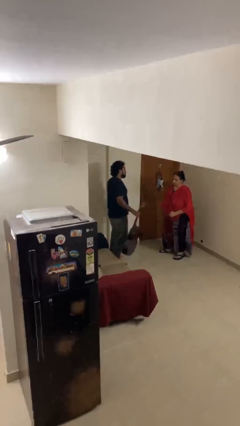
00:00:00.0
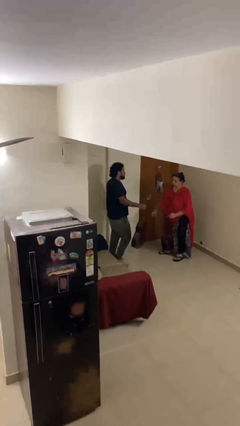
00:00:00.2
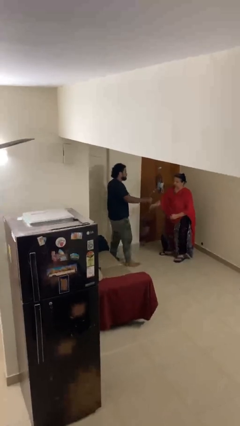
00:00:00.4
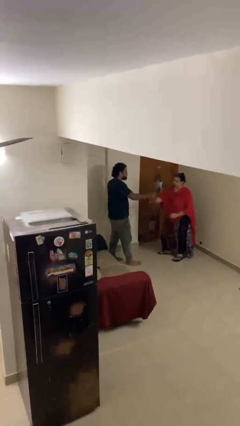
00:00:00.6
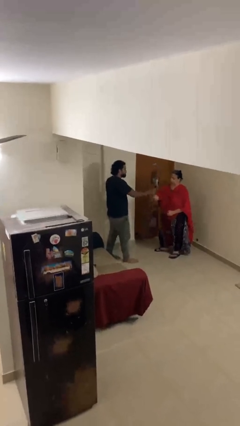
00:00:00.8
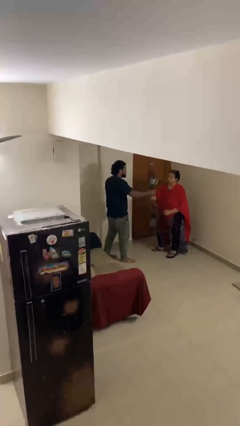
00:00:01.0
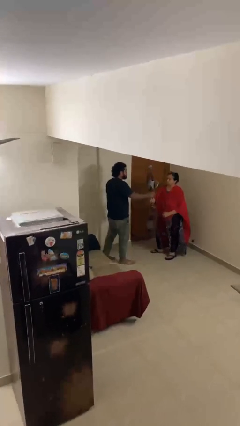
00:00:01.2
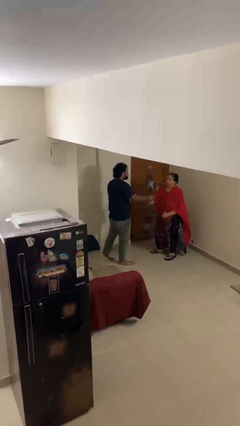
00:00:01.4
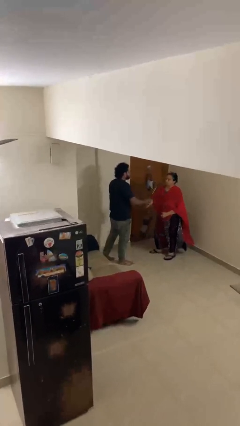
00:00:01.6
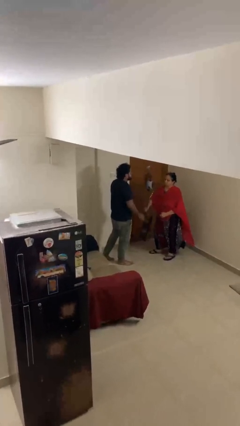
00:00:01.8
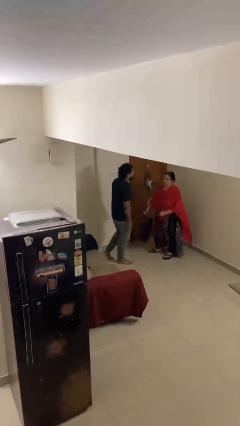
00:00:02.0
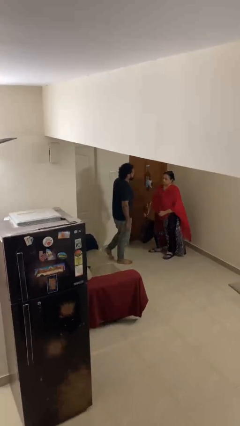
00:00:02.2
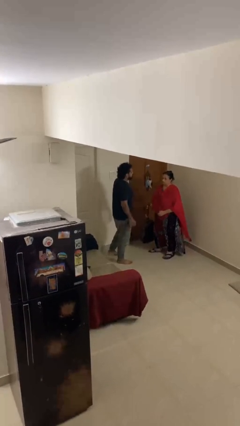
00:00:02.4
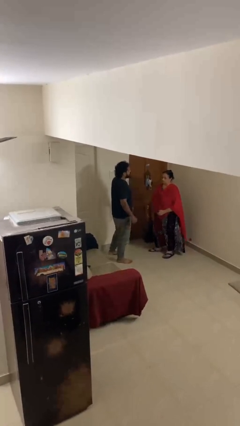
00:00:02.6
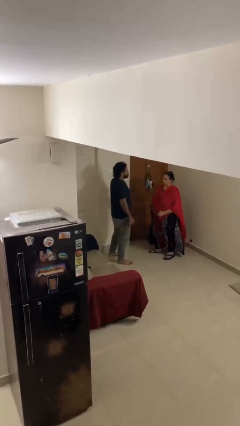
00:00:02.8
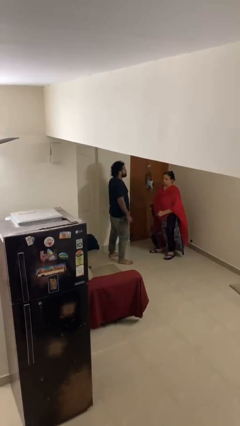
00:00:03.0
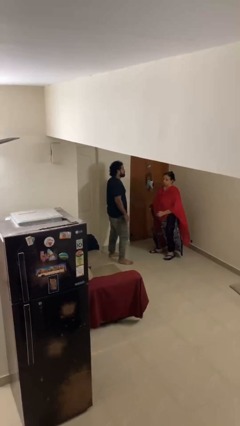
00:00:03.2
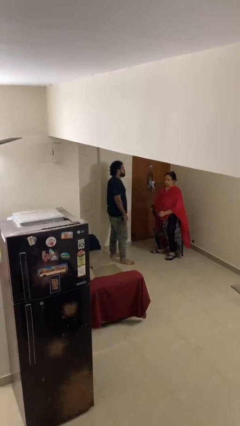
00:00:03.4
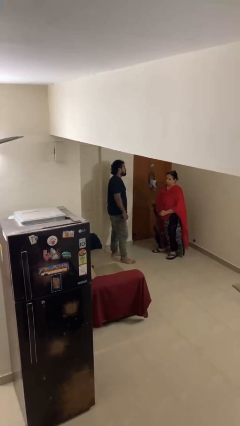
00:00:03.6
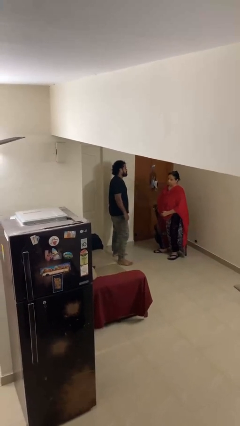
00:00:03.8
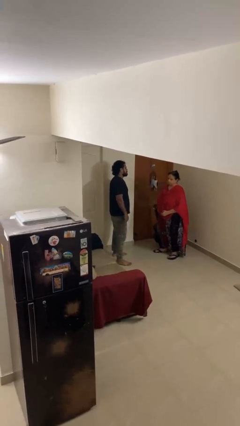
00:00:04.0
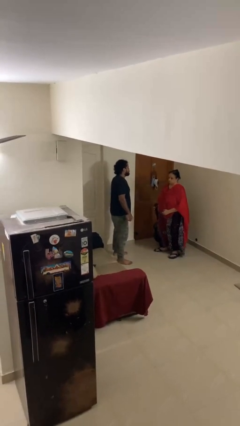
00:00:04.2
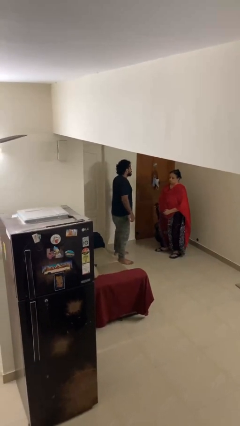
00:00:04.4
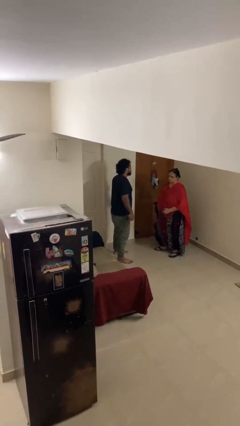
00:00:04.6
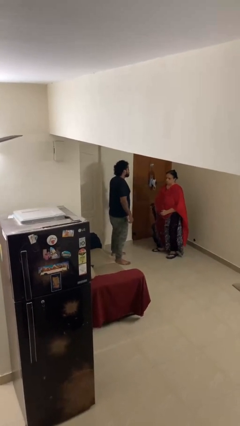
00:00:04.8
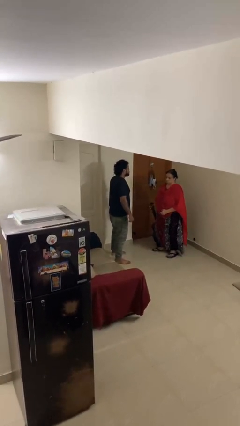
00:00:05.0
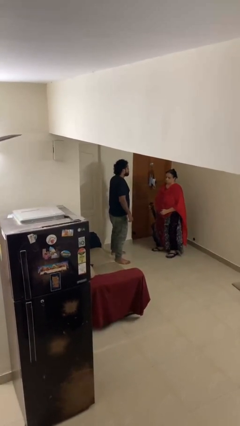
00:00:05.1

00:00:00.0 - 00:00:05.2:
person transfers object to person

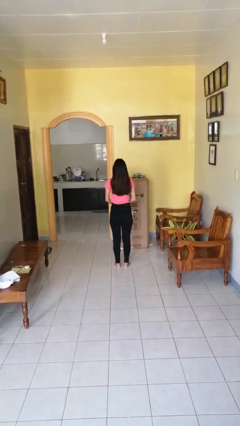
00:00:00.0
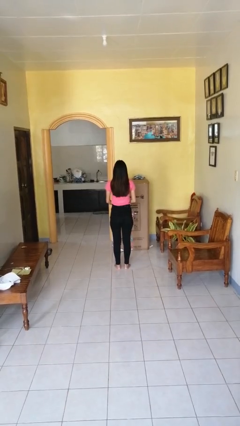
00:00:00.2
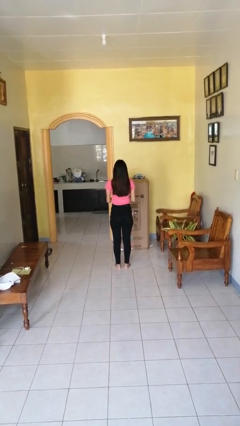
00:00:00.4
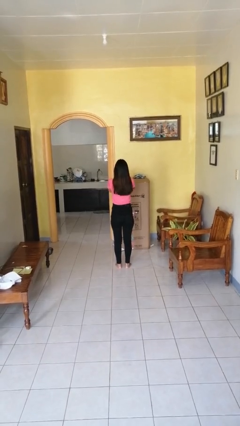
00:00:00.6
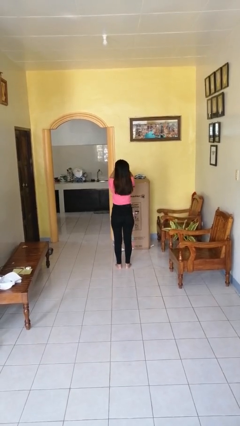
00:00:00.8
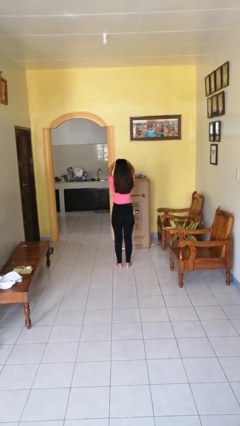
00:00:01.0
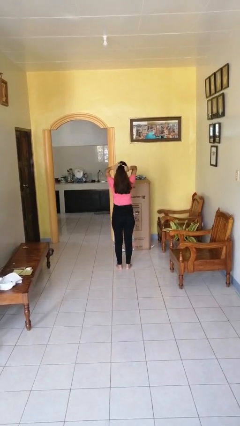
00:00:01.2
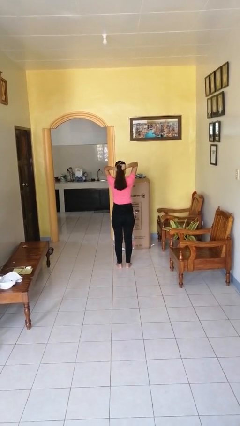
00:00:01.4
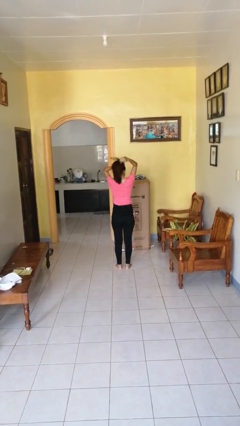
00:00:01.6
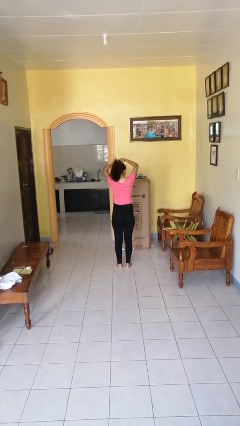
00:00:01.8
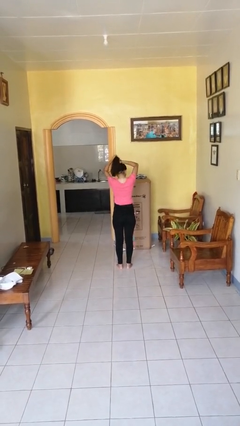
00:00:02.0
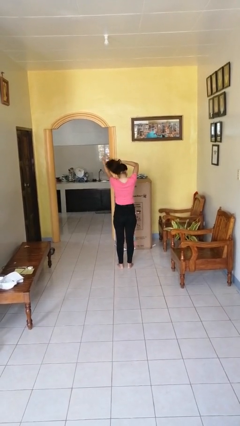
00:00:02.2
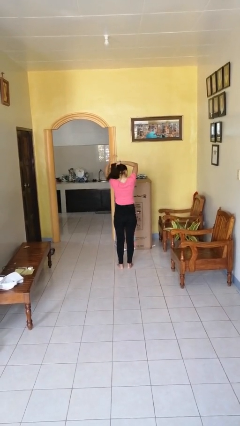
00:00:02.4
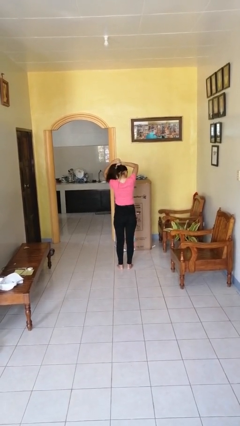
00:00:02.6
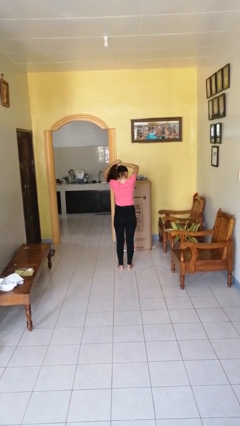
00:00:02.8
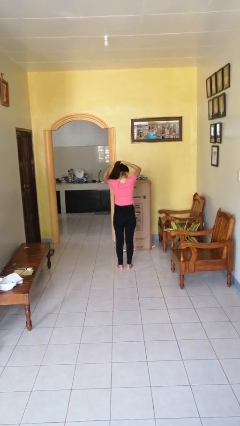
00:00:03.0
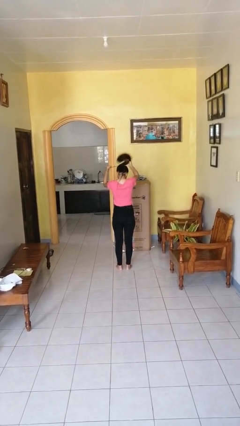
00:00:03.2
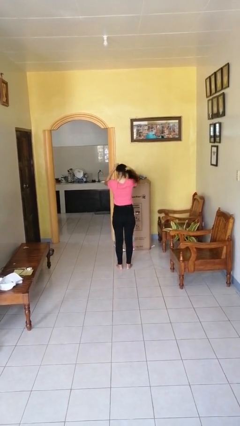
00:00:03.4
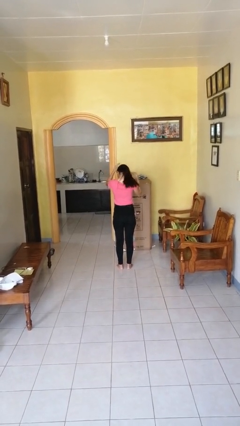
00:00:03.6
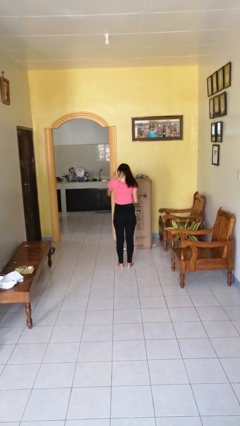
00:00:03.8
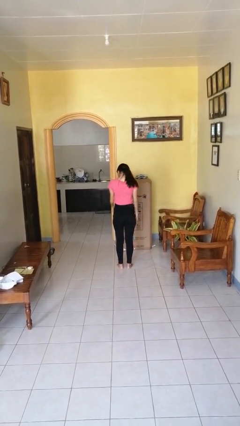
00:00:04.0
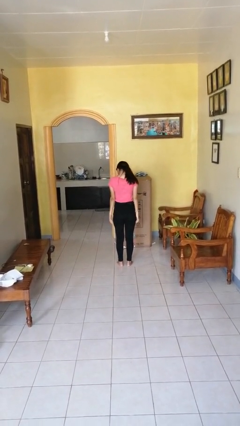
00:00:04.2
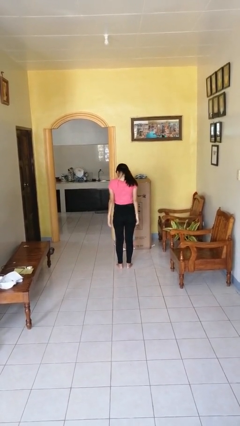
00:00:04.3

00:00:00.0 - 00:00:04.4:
person puts hair in ponytail

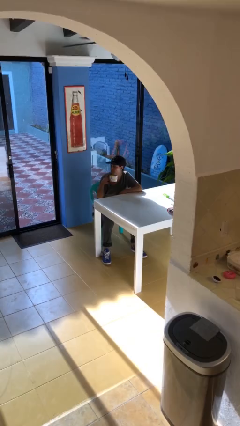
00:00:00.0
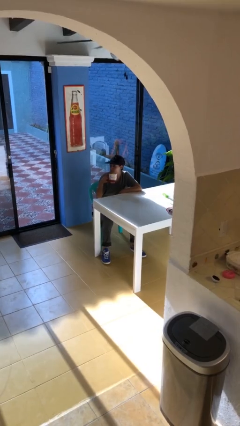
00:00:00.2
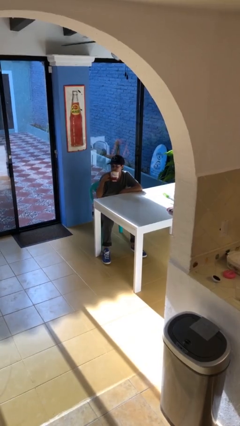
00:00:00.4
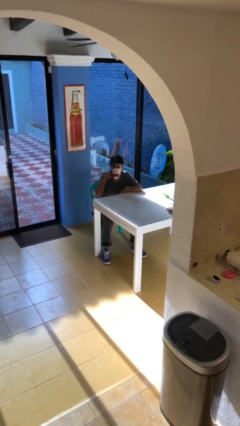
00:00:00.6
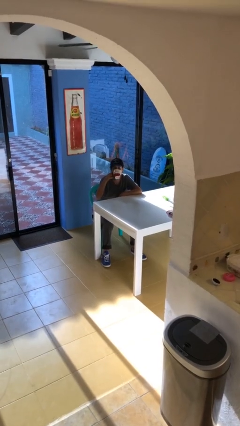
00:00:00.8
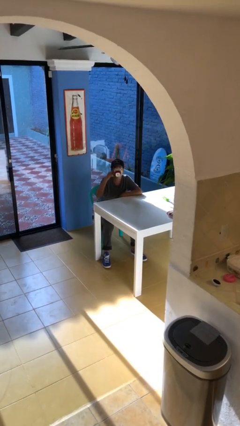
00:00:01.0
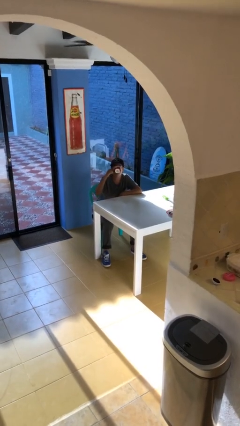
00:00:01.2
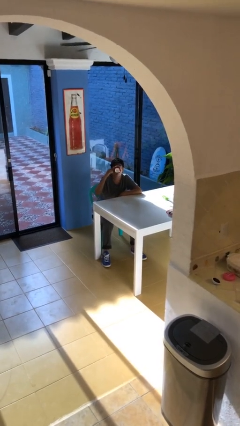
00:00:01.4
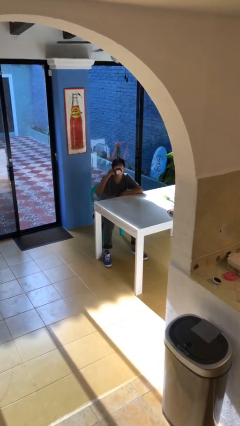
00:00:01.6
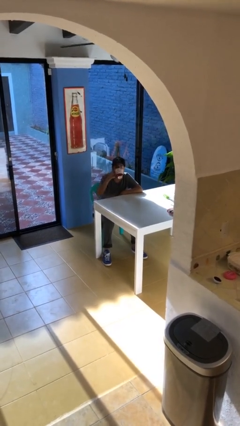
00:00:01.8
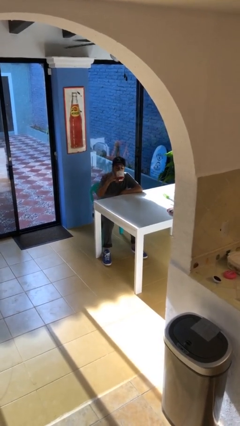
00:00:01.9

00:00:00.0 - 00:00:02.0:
person drinks from mug

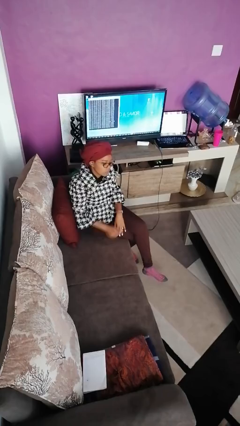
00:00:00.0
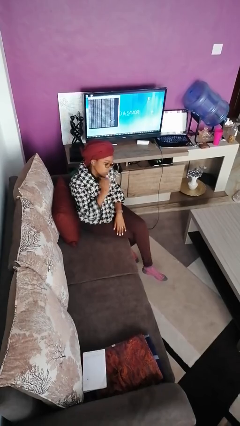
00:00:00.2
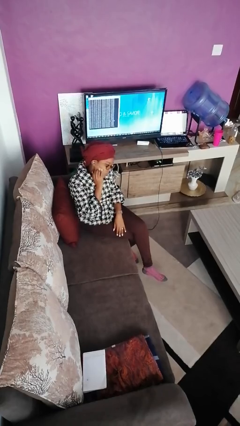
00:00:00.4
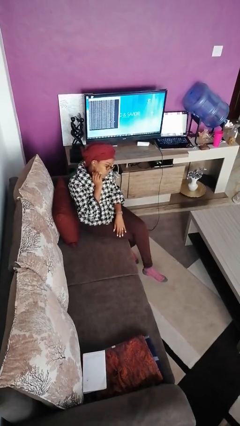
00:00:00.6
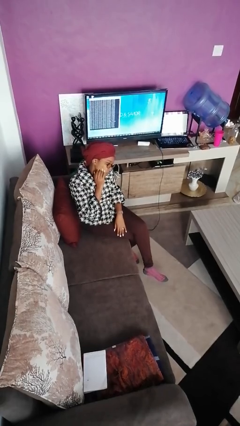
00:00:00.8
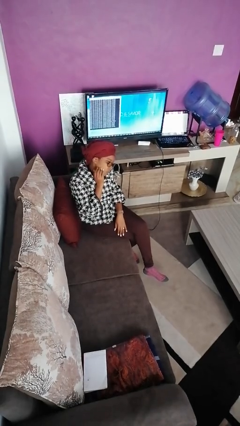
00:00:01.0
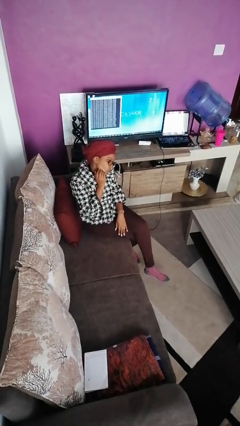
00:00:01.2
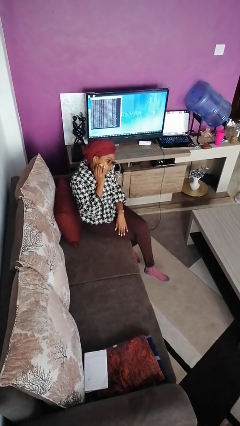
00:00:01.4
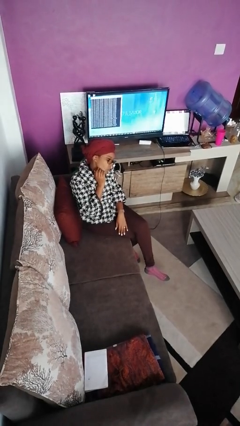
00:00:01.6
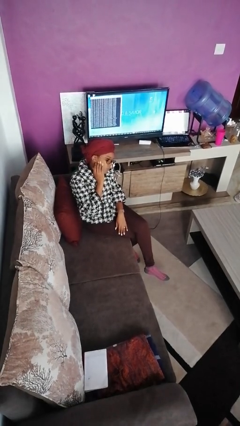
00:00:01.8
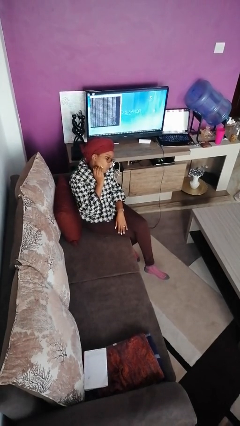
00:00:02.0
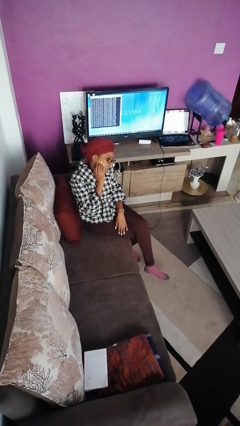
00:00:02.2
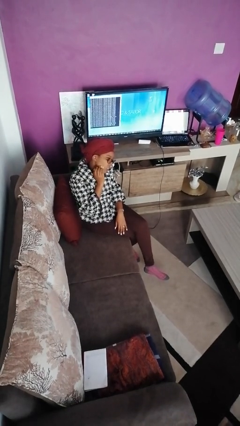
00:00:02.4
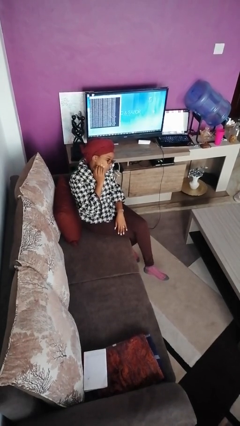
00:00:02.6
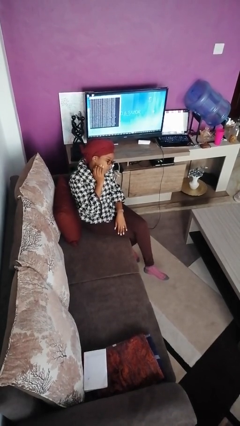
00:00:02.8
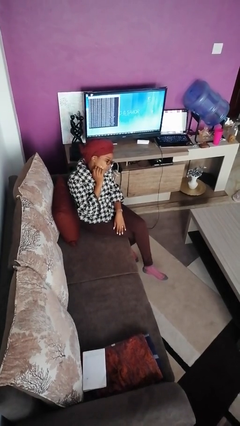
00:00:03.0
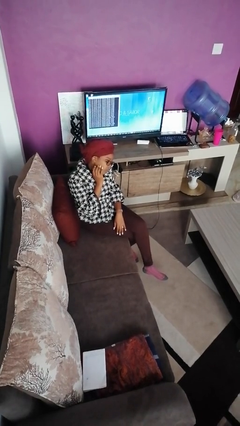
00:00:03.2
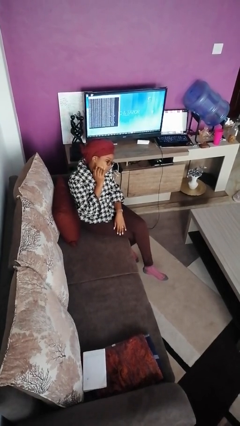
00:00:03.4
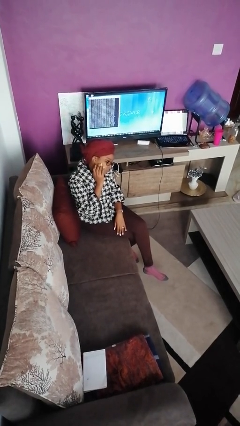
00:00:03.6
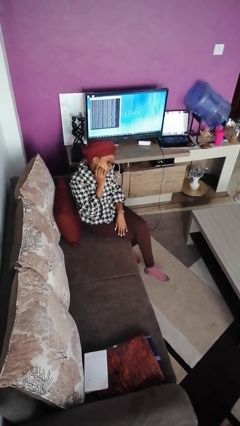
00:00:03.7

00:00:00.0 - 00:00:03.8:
person scratches face

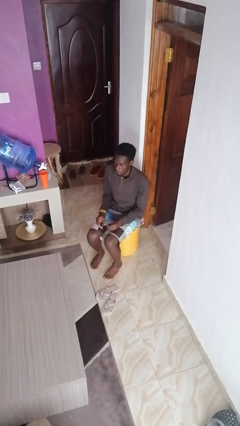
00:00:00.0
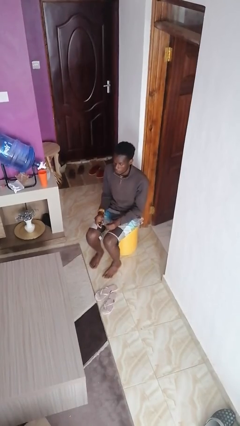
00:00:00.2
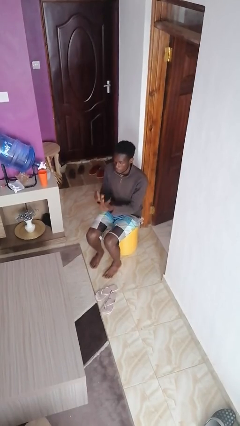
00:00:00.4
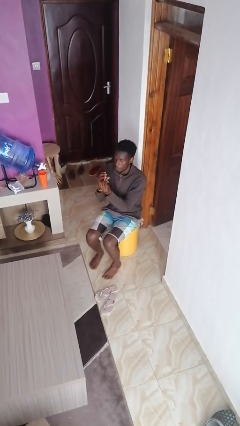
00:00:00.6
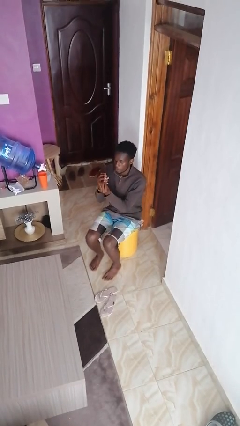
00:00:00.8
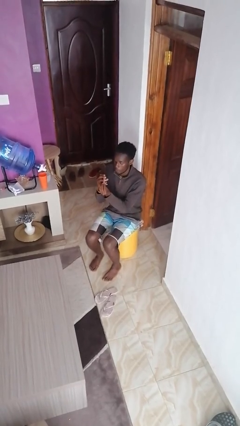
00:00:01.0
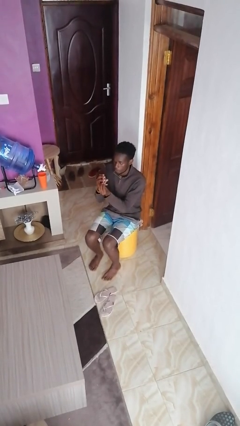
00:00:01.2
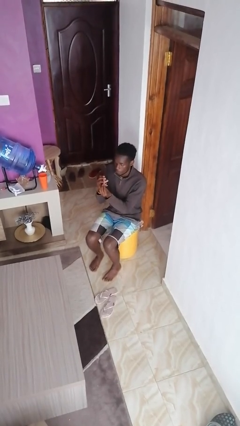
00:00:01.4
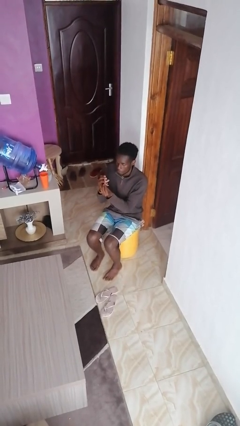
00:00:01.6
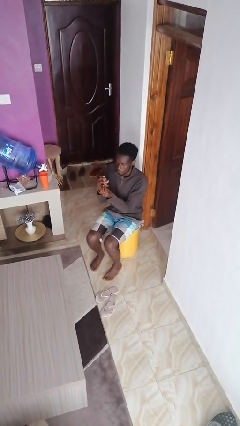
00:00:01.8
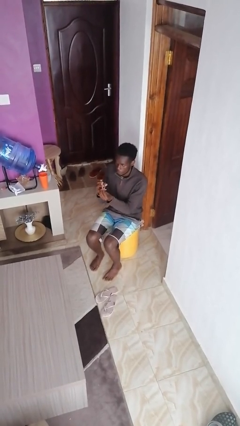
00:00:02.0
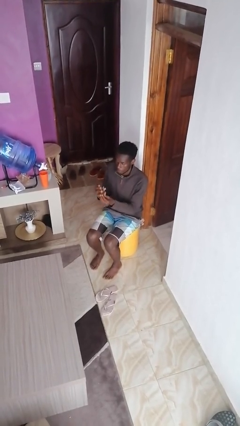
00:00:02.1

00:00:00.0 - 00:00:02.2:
person clips fingernails
